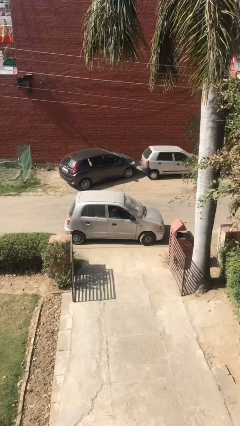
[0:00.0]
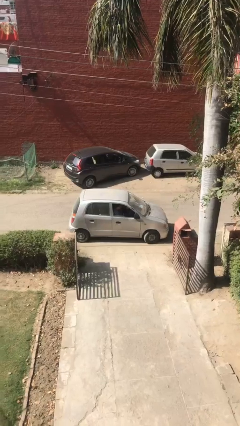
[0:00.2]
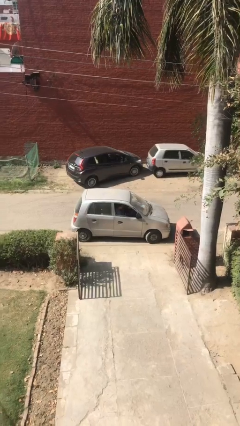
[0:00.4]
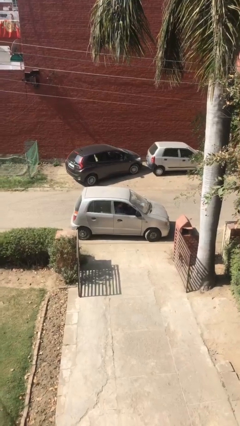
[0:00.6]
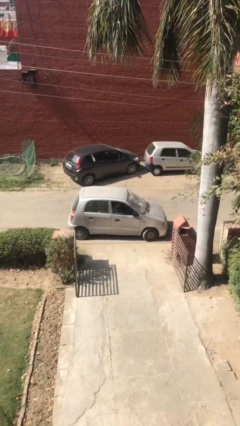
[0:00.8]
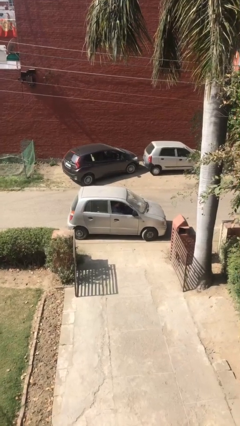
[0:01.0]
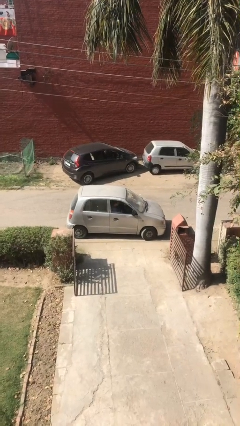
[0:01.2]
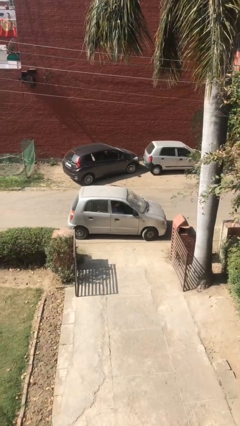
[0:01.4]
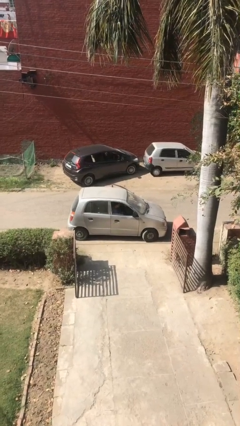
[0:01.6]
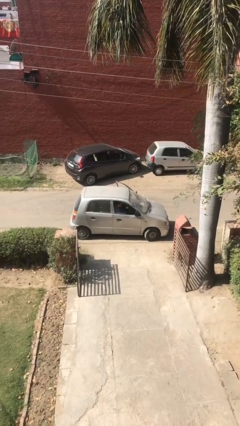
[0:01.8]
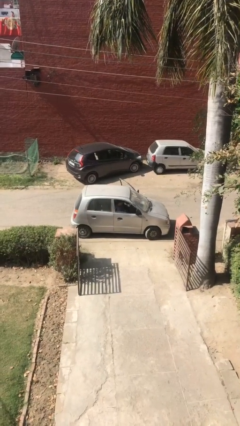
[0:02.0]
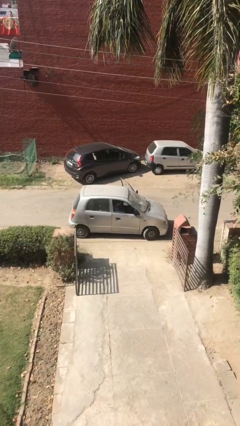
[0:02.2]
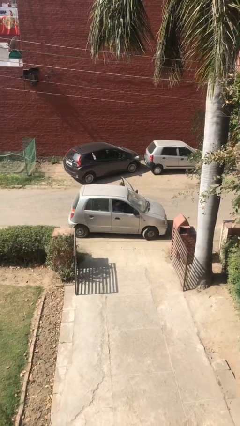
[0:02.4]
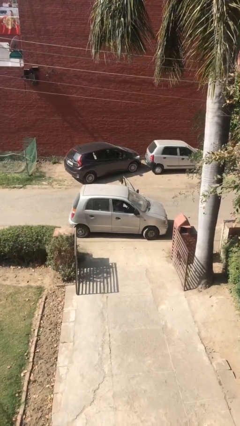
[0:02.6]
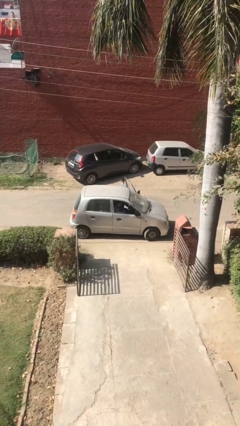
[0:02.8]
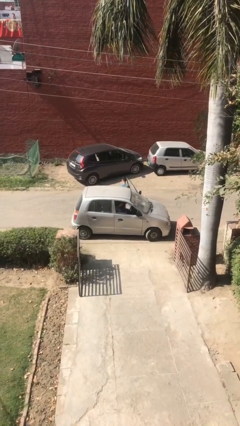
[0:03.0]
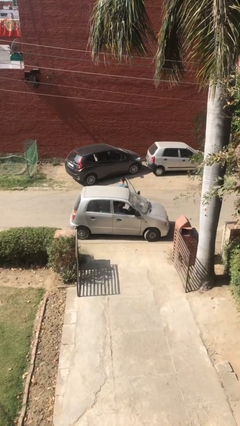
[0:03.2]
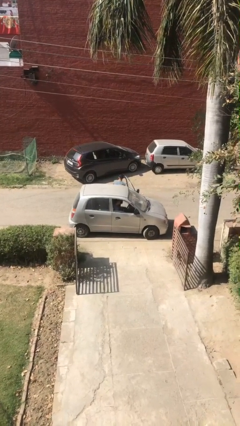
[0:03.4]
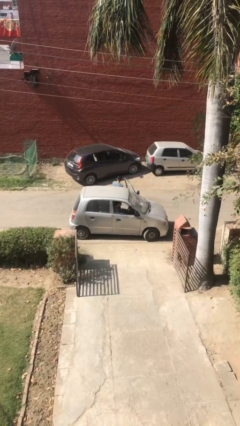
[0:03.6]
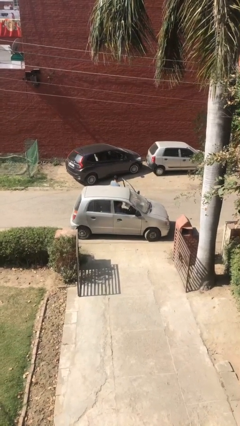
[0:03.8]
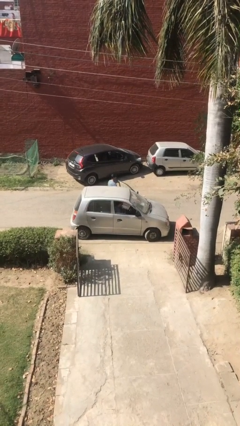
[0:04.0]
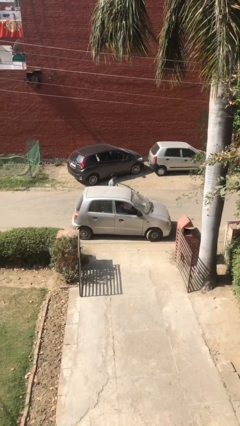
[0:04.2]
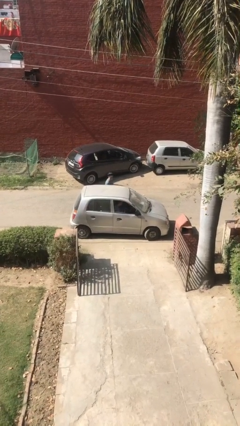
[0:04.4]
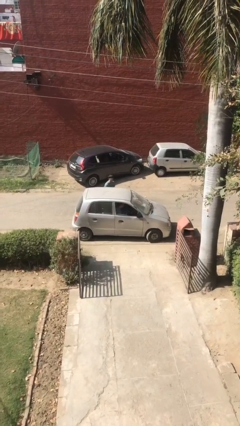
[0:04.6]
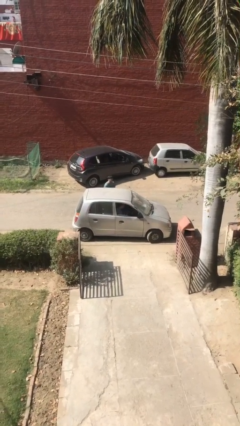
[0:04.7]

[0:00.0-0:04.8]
car drops off person

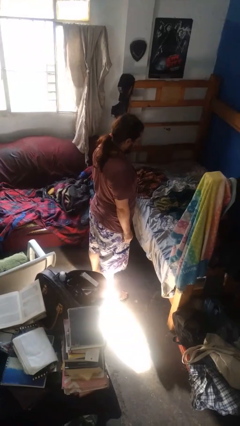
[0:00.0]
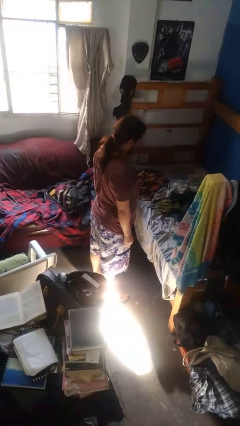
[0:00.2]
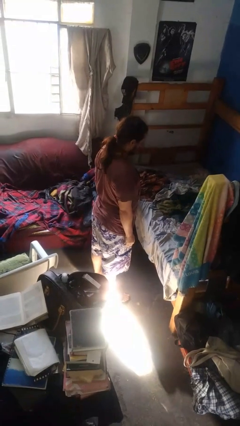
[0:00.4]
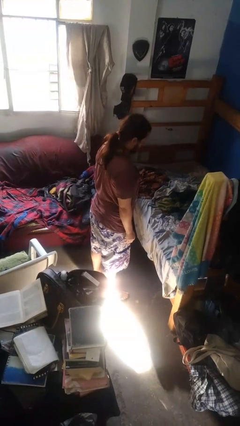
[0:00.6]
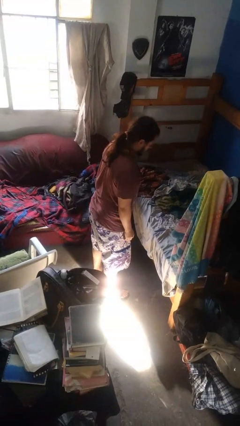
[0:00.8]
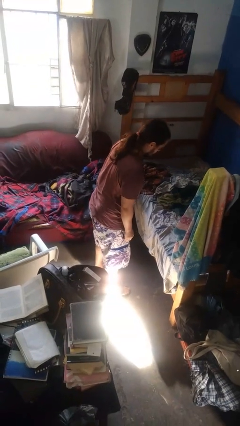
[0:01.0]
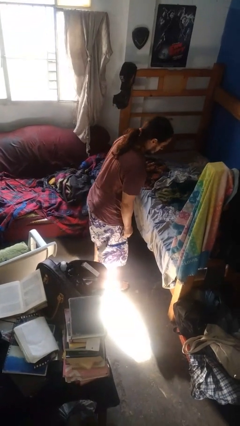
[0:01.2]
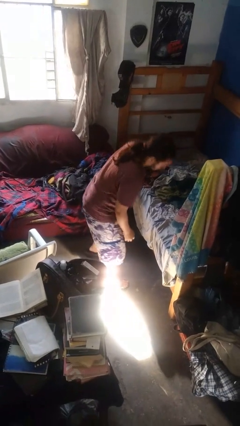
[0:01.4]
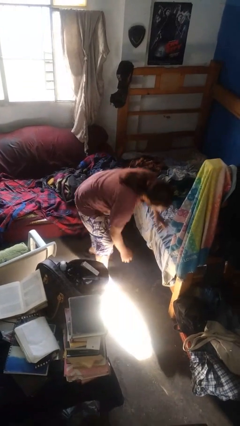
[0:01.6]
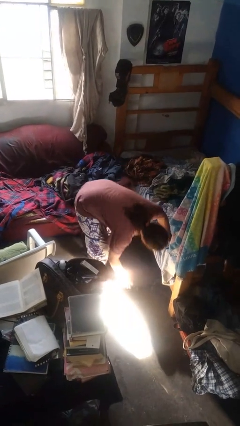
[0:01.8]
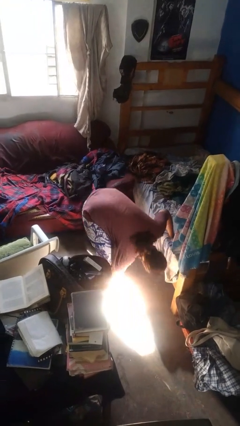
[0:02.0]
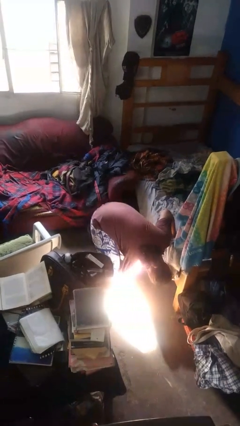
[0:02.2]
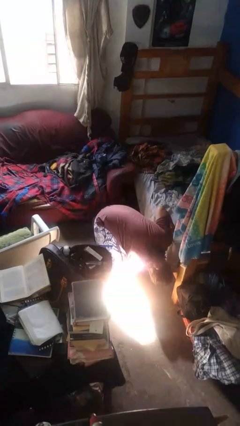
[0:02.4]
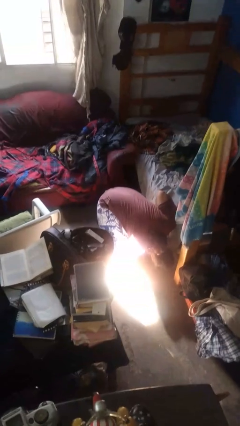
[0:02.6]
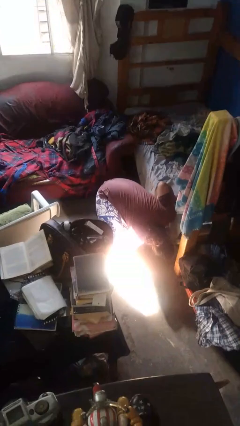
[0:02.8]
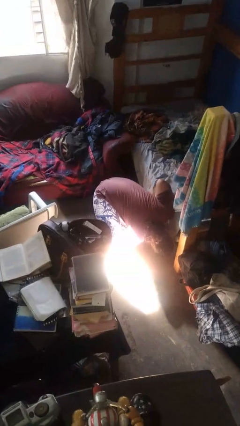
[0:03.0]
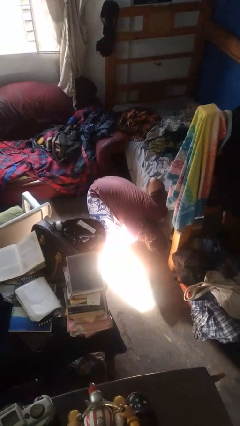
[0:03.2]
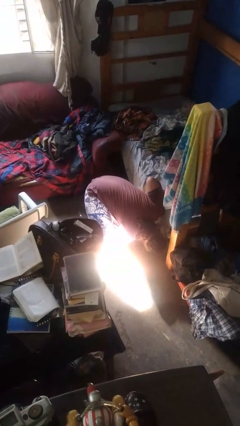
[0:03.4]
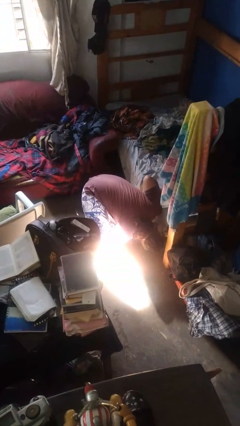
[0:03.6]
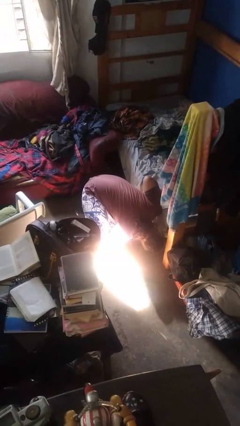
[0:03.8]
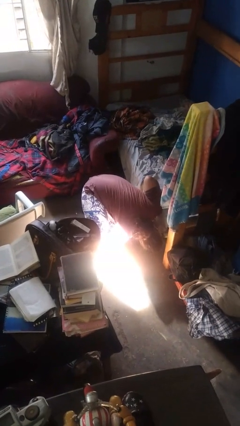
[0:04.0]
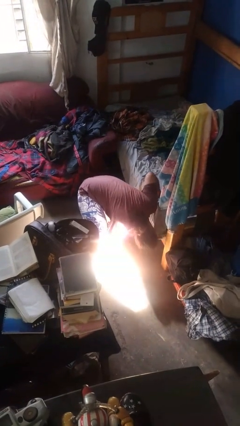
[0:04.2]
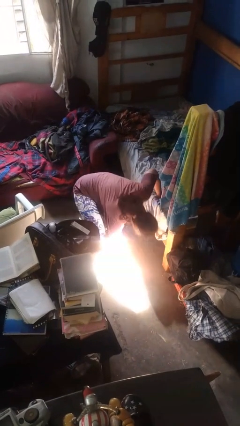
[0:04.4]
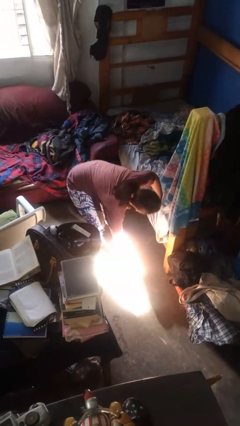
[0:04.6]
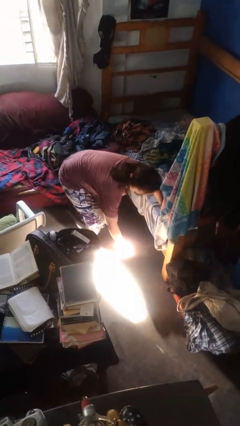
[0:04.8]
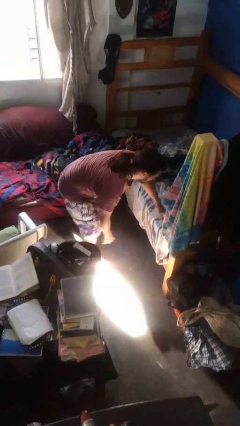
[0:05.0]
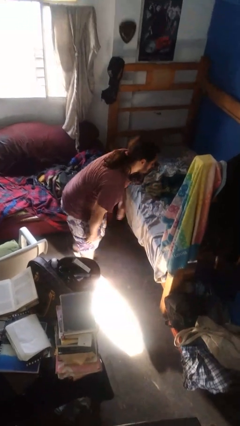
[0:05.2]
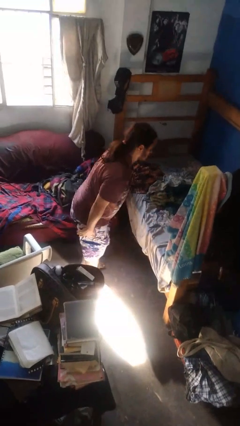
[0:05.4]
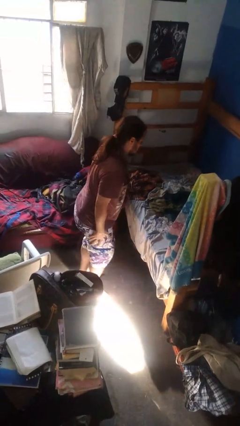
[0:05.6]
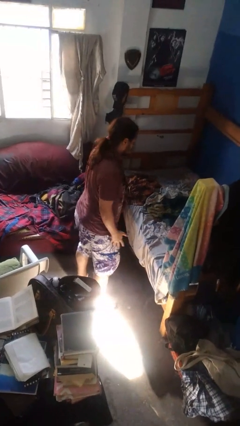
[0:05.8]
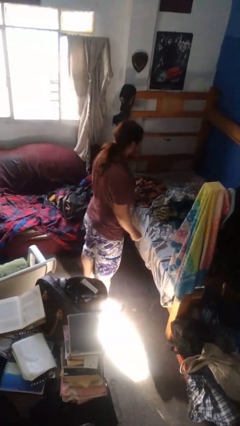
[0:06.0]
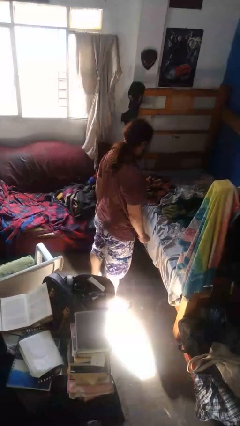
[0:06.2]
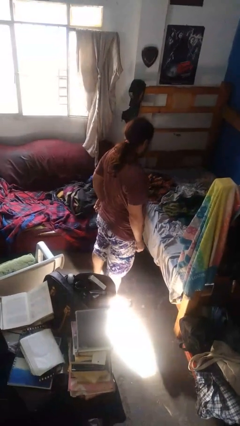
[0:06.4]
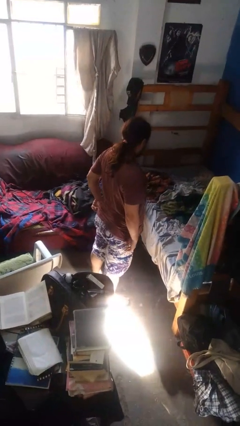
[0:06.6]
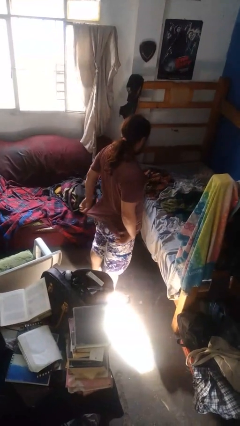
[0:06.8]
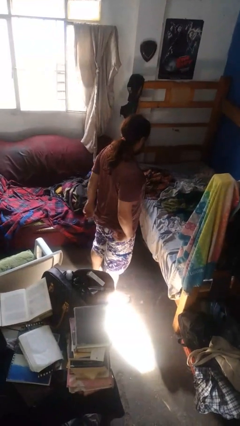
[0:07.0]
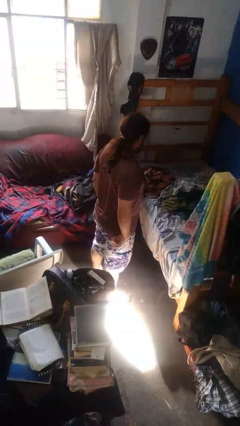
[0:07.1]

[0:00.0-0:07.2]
person searches under bed

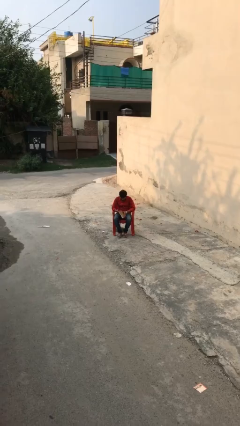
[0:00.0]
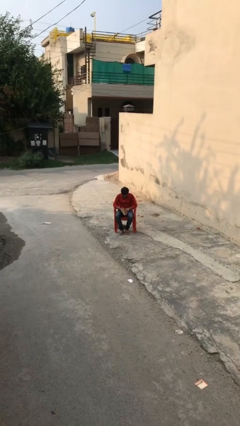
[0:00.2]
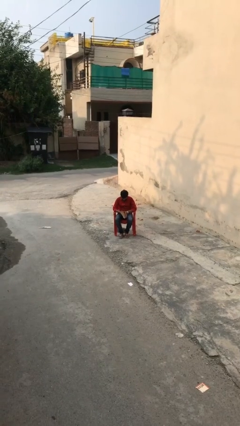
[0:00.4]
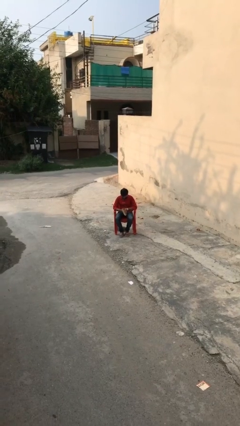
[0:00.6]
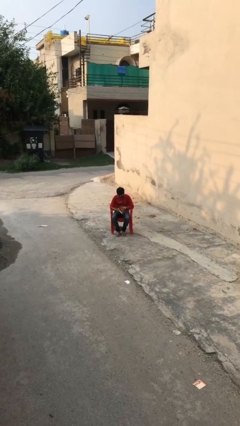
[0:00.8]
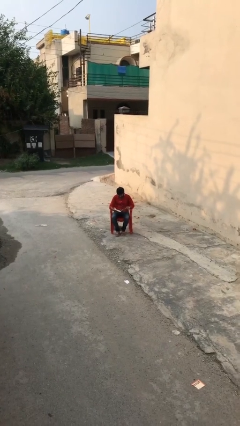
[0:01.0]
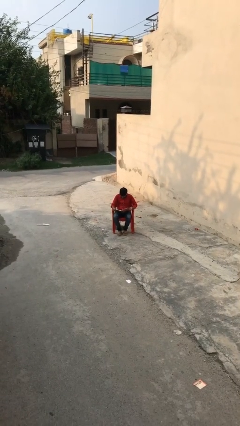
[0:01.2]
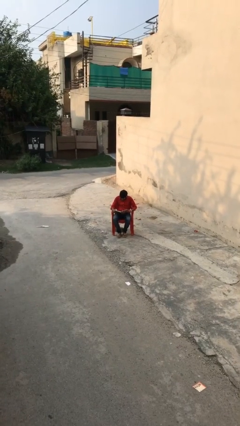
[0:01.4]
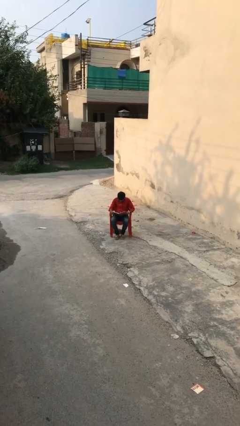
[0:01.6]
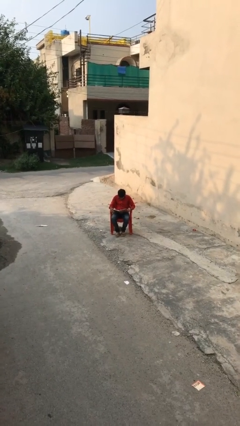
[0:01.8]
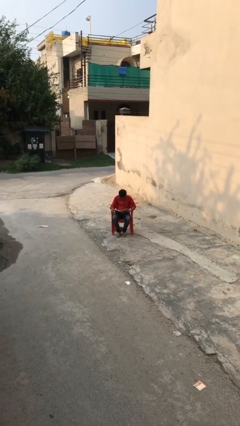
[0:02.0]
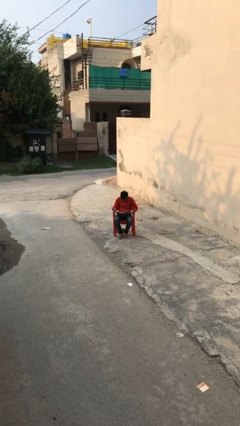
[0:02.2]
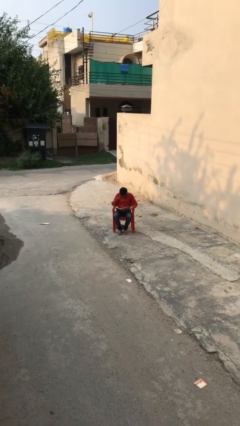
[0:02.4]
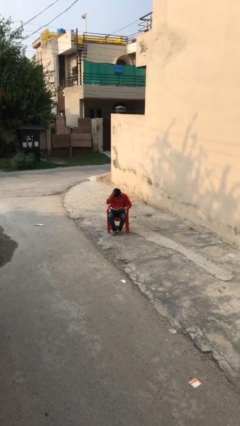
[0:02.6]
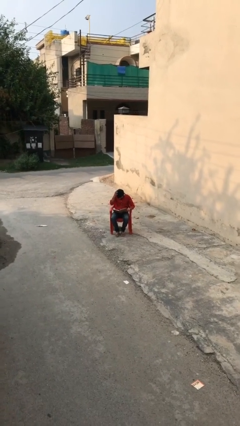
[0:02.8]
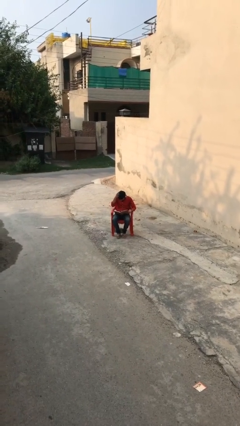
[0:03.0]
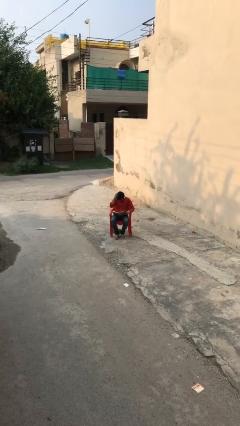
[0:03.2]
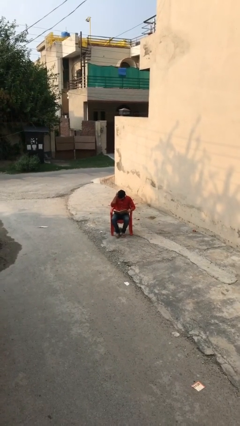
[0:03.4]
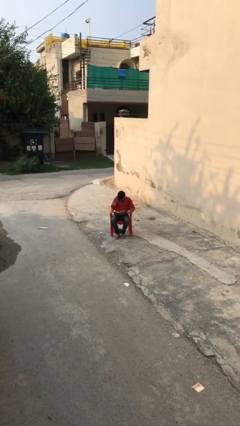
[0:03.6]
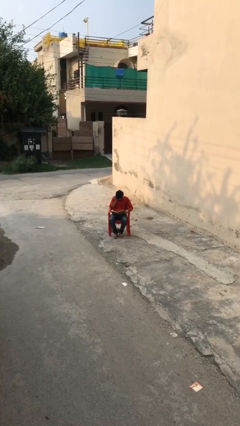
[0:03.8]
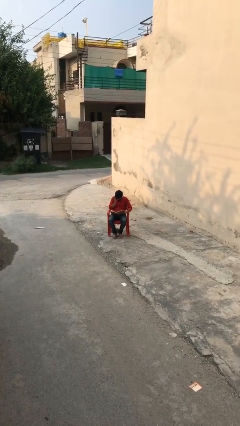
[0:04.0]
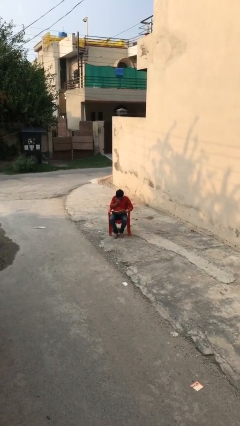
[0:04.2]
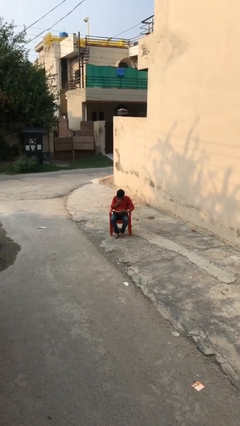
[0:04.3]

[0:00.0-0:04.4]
person reads document

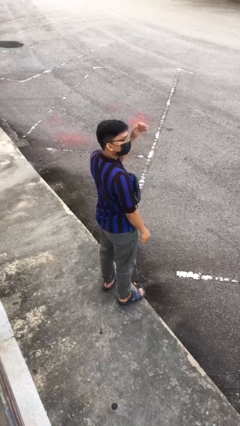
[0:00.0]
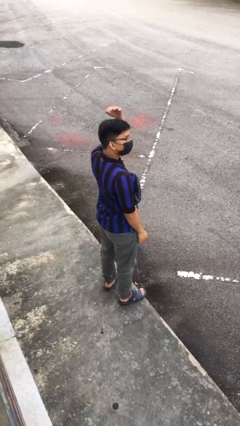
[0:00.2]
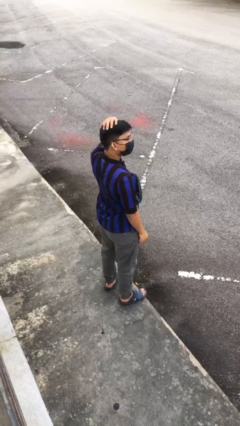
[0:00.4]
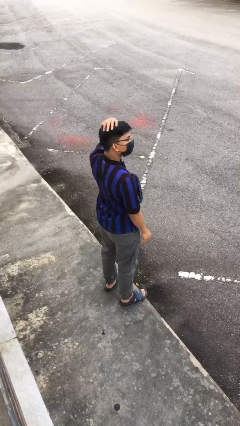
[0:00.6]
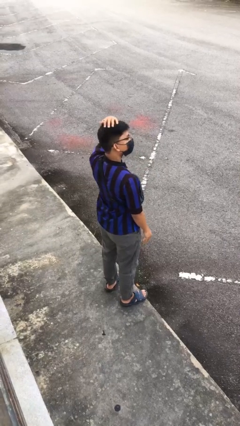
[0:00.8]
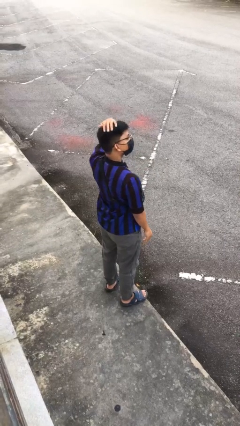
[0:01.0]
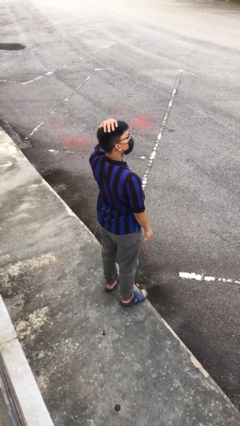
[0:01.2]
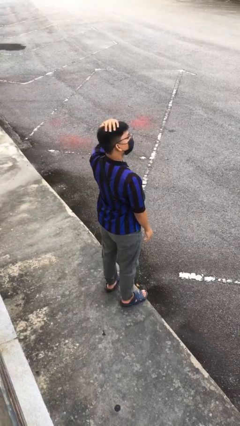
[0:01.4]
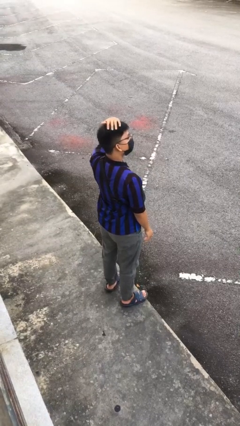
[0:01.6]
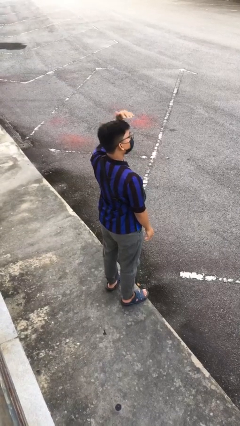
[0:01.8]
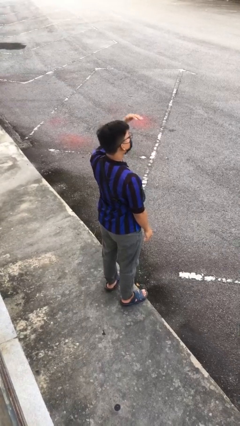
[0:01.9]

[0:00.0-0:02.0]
person pats head
